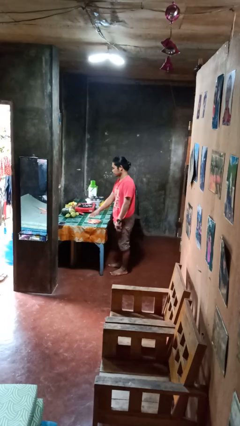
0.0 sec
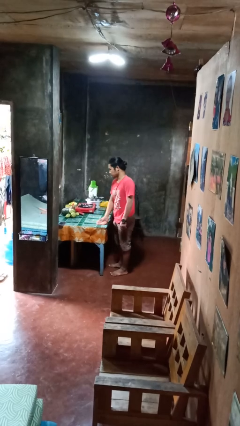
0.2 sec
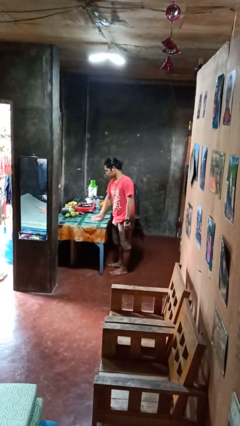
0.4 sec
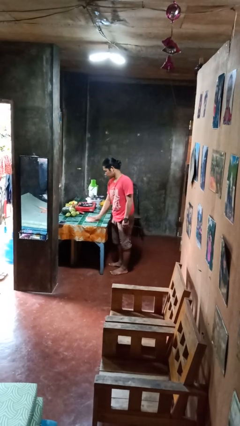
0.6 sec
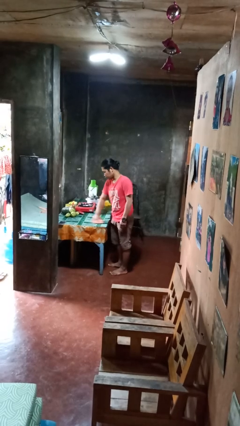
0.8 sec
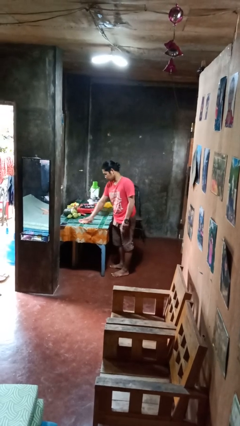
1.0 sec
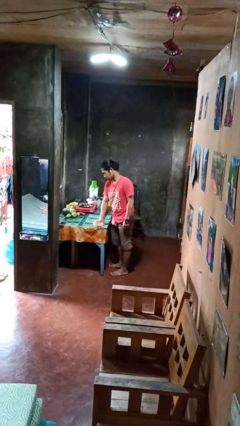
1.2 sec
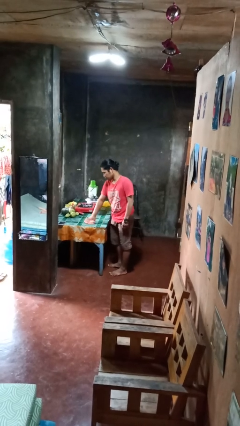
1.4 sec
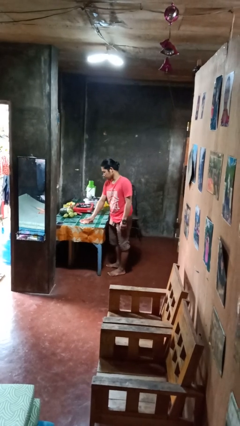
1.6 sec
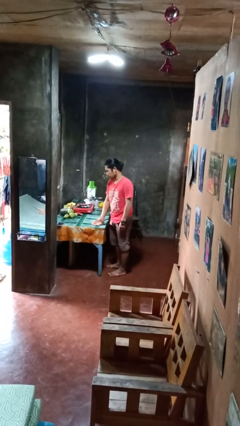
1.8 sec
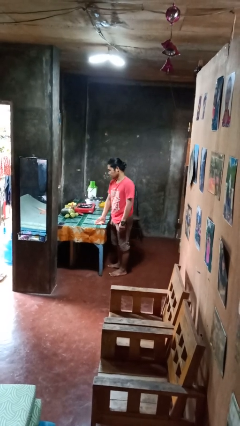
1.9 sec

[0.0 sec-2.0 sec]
person cleans table with rag

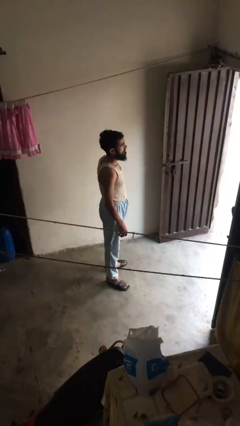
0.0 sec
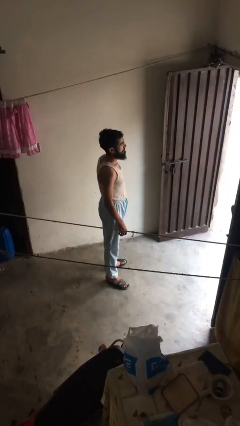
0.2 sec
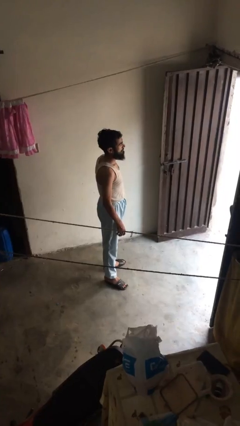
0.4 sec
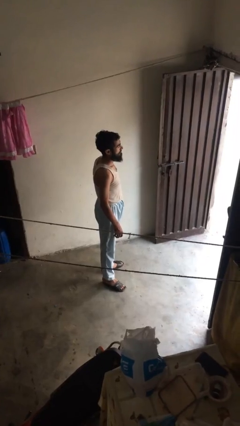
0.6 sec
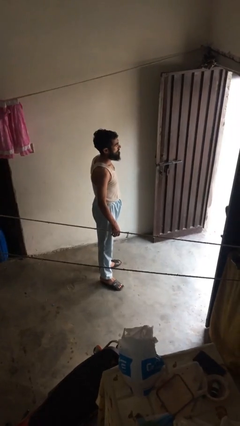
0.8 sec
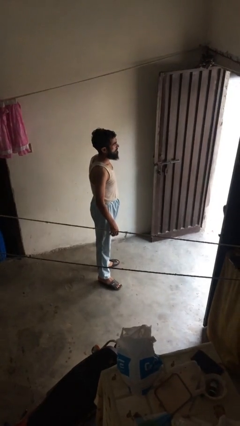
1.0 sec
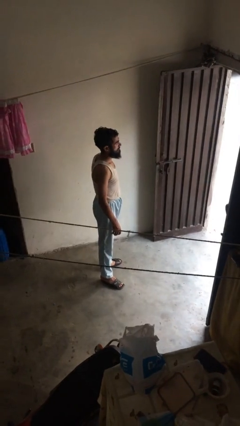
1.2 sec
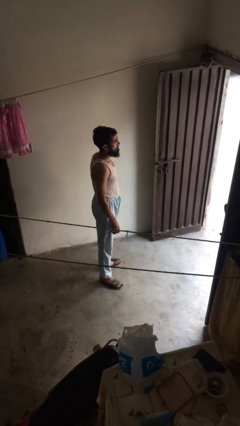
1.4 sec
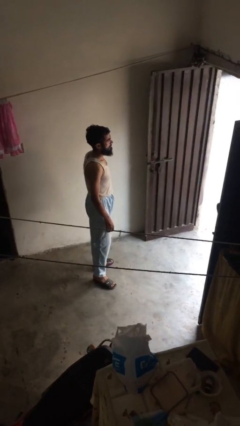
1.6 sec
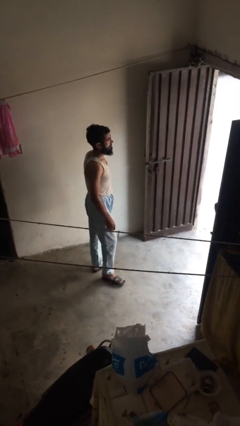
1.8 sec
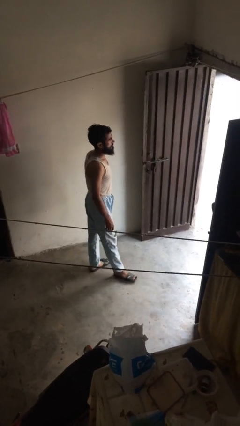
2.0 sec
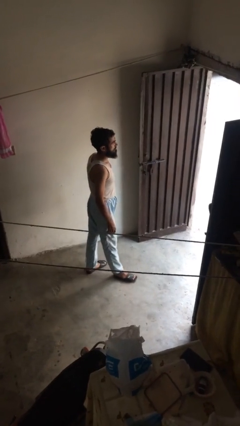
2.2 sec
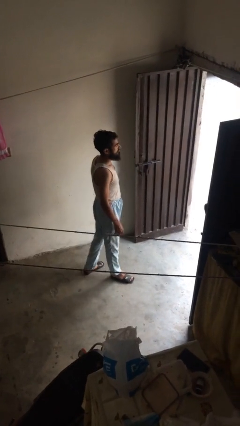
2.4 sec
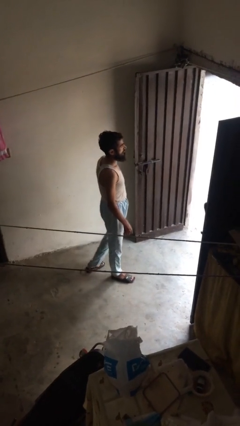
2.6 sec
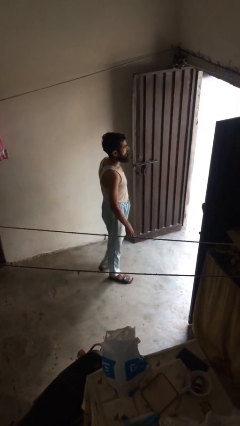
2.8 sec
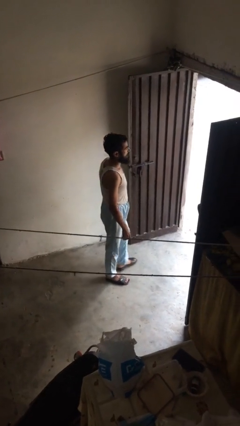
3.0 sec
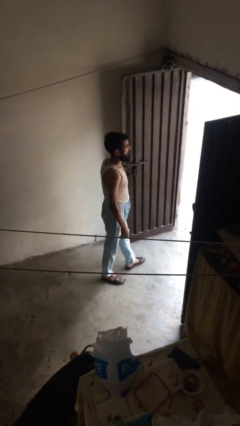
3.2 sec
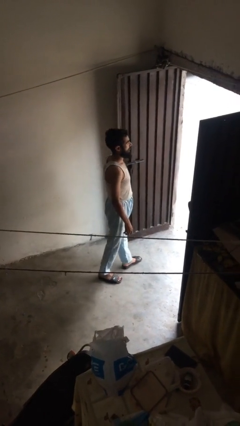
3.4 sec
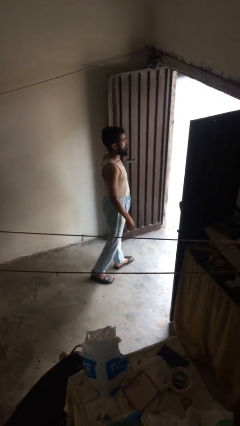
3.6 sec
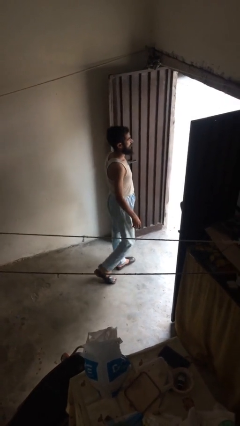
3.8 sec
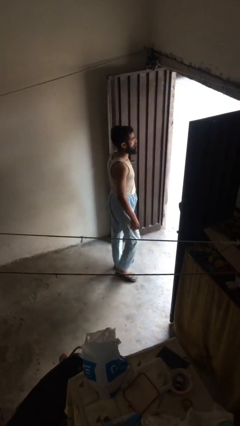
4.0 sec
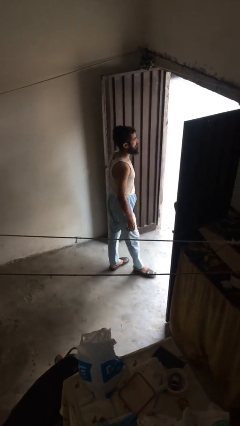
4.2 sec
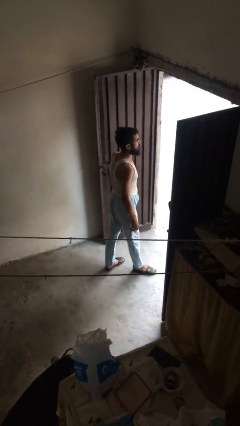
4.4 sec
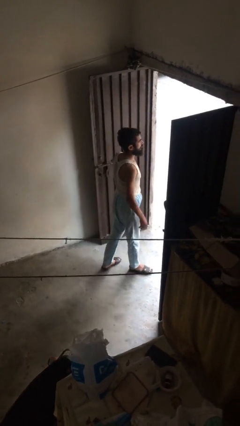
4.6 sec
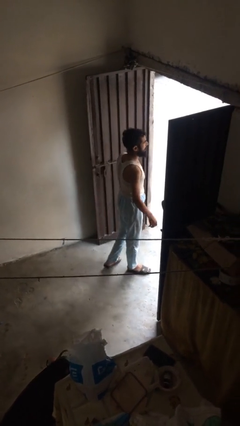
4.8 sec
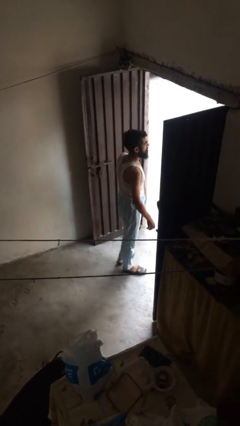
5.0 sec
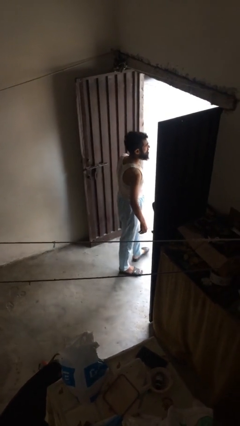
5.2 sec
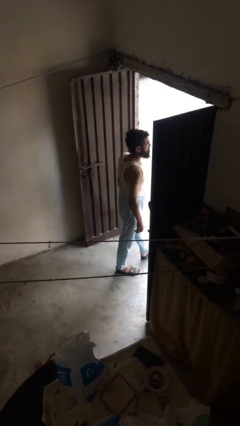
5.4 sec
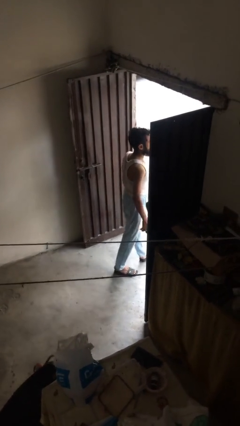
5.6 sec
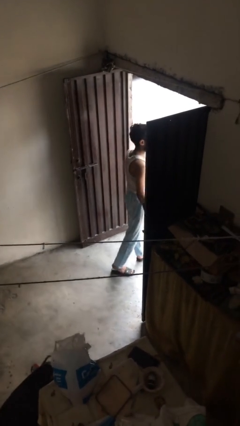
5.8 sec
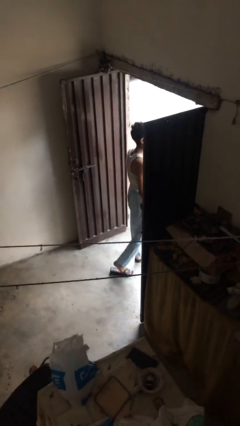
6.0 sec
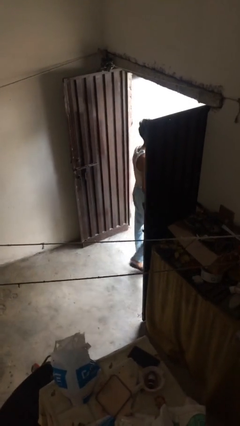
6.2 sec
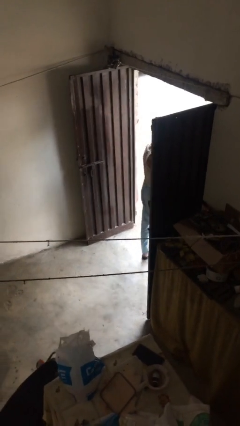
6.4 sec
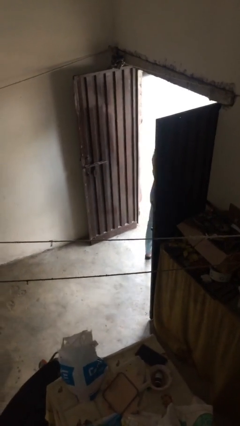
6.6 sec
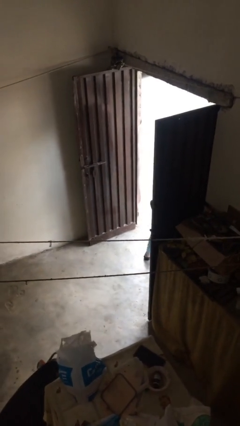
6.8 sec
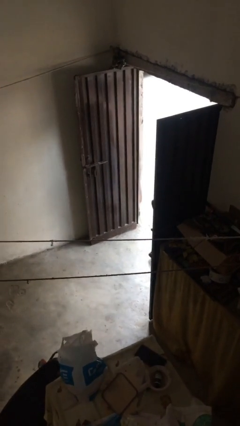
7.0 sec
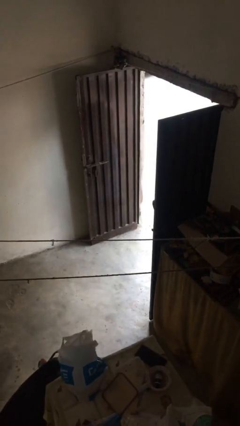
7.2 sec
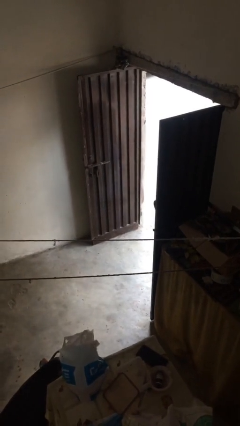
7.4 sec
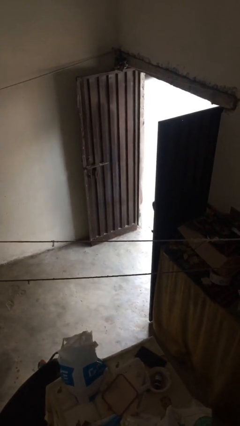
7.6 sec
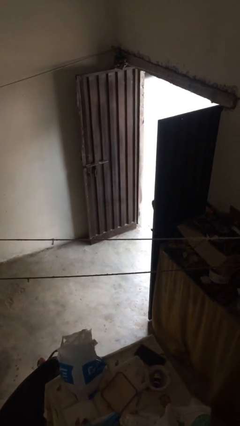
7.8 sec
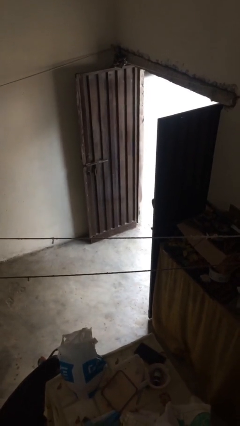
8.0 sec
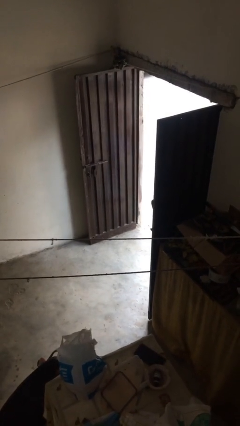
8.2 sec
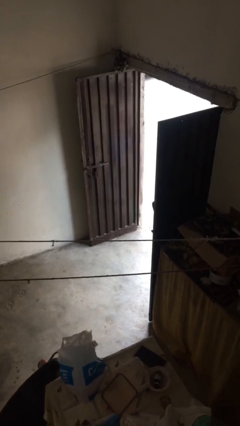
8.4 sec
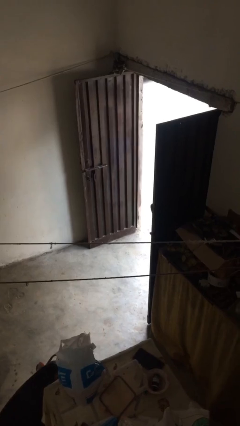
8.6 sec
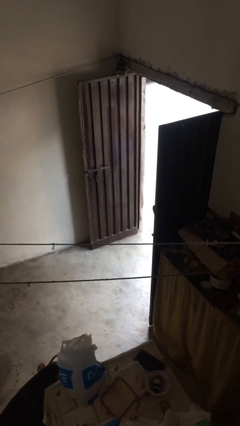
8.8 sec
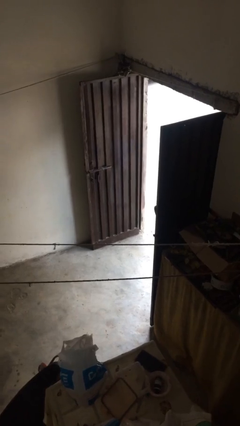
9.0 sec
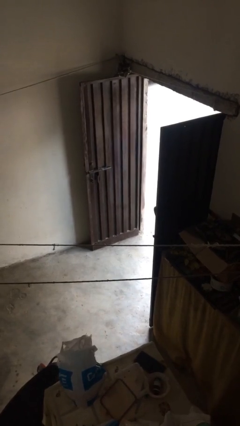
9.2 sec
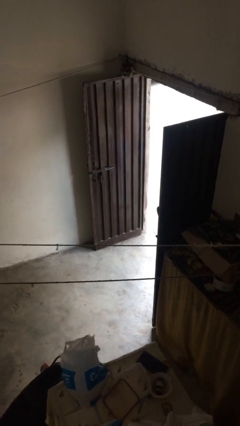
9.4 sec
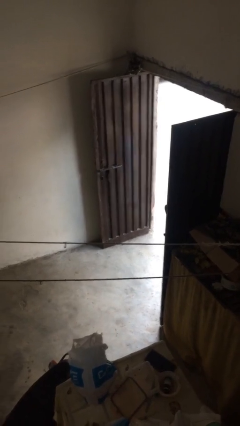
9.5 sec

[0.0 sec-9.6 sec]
person exits scene through structure

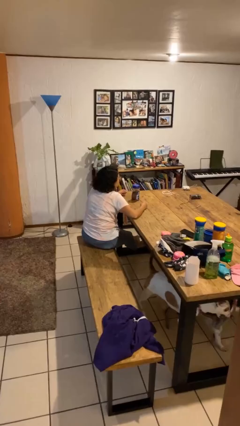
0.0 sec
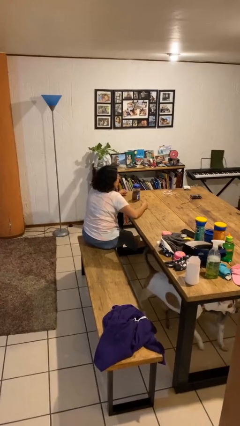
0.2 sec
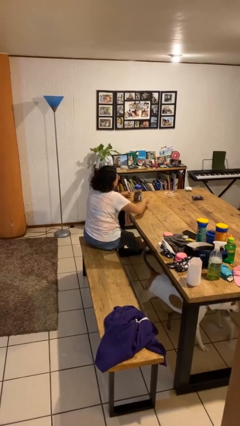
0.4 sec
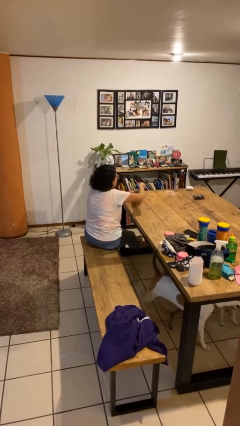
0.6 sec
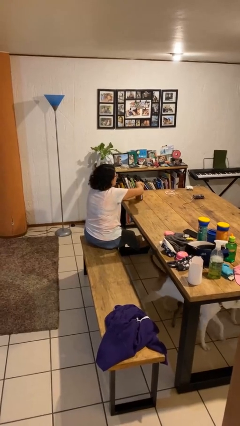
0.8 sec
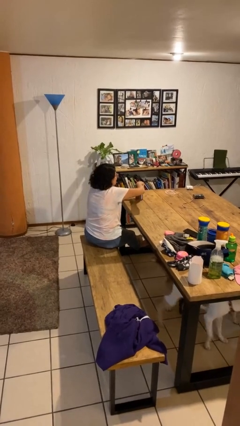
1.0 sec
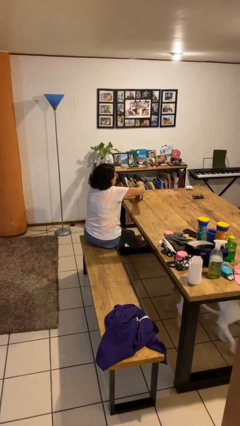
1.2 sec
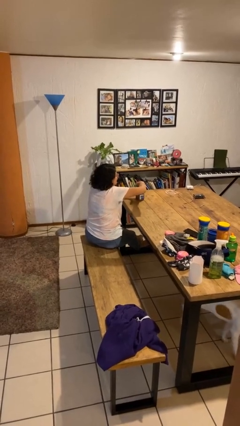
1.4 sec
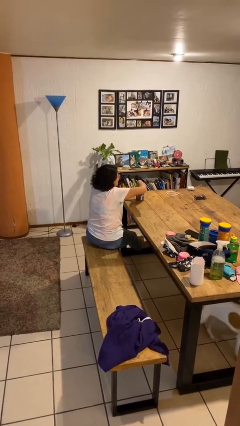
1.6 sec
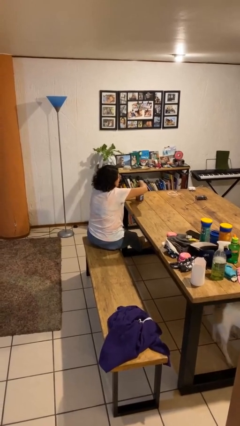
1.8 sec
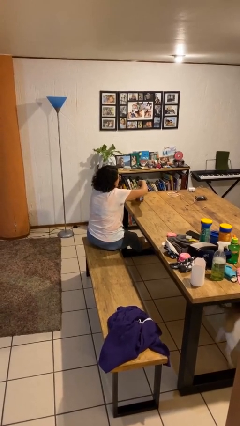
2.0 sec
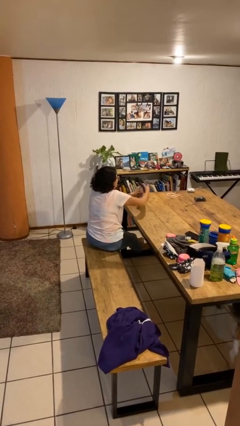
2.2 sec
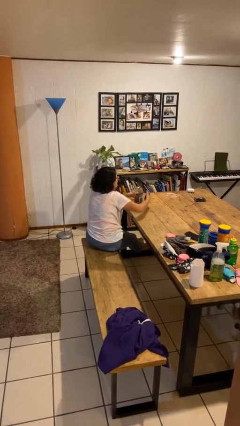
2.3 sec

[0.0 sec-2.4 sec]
person opens jar

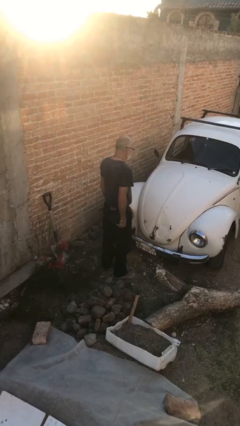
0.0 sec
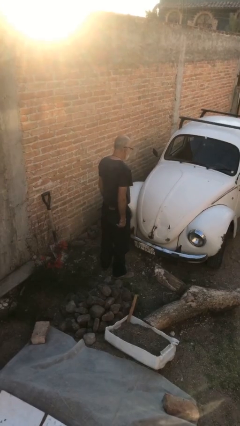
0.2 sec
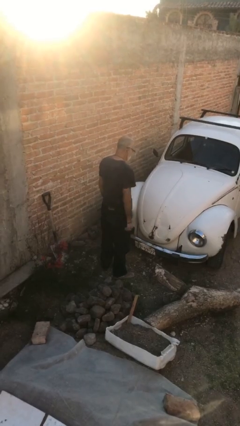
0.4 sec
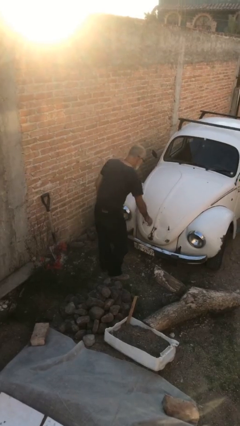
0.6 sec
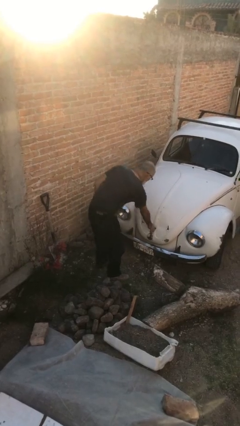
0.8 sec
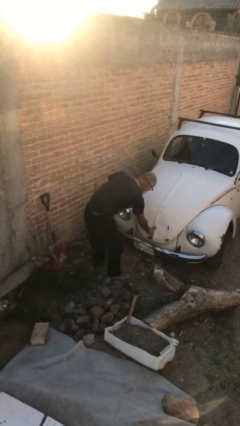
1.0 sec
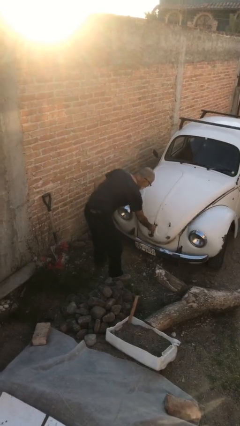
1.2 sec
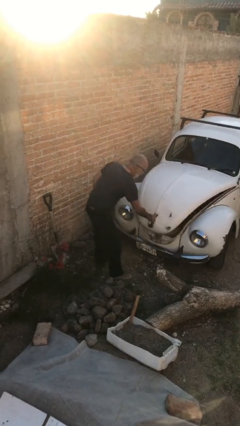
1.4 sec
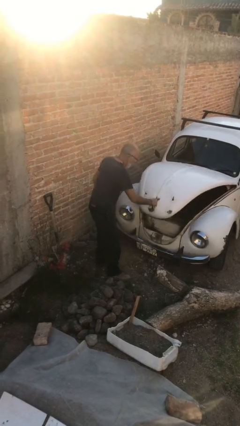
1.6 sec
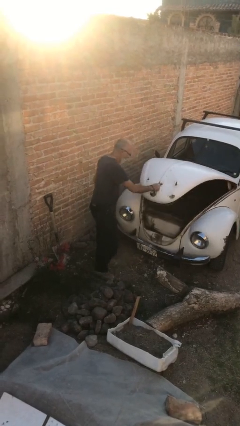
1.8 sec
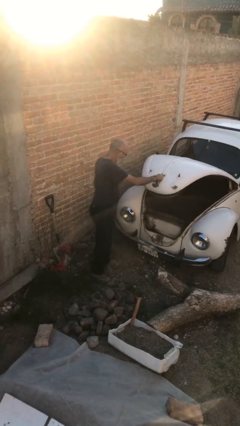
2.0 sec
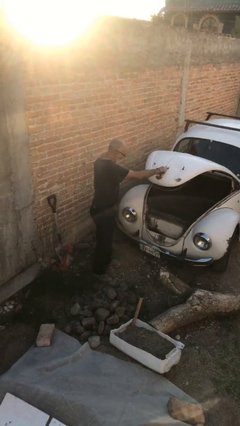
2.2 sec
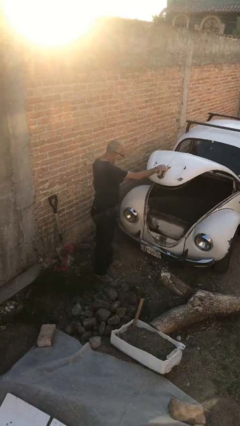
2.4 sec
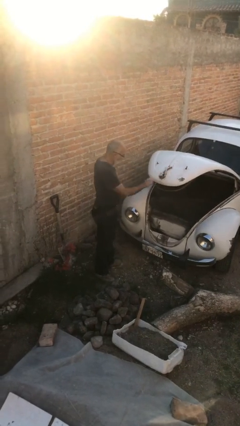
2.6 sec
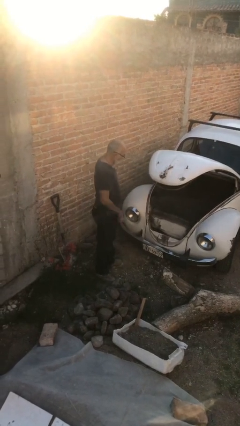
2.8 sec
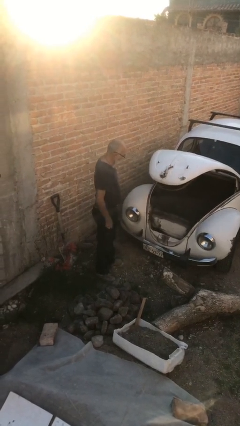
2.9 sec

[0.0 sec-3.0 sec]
person opens car trunk

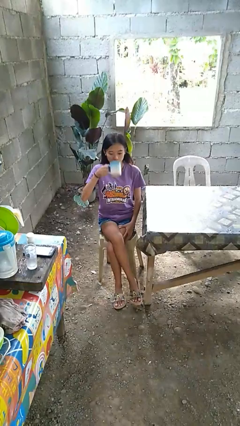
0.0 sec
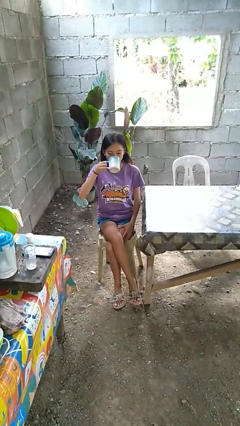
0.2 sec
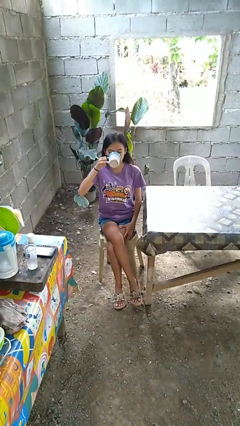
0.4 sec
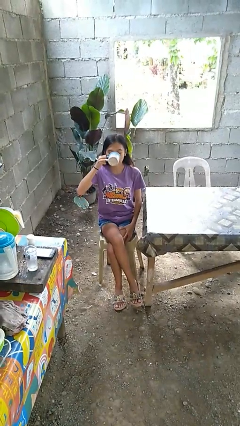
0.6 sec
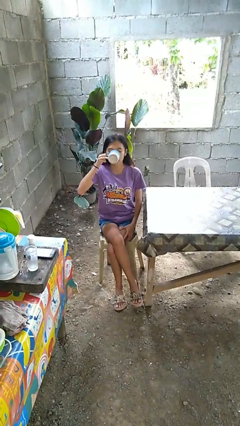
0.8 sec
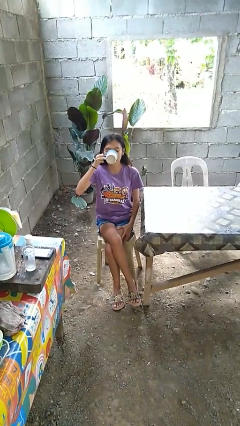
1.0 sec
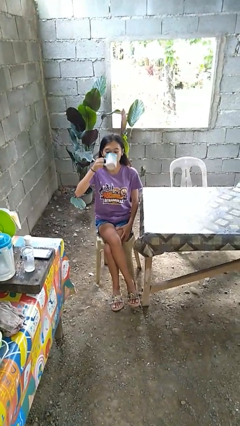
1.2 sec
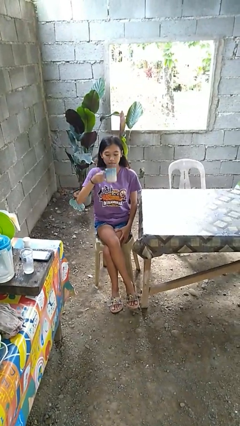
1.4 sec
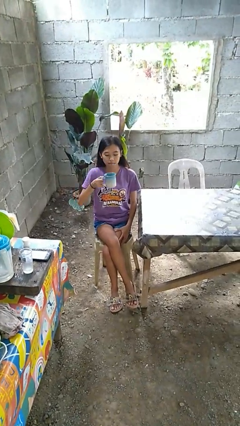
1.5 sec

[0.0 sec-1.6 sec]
person drinks from mug
